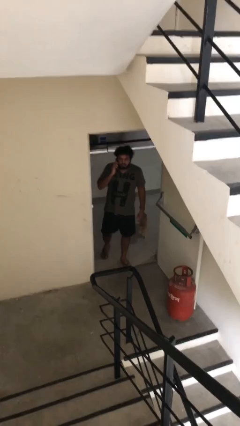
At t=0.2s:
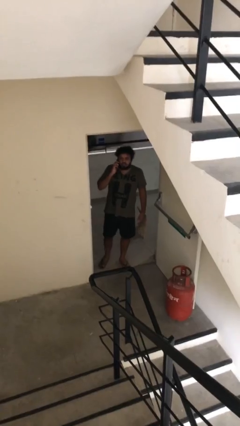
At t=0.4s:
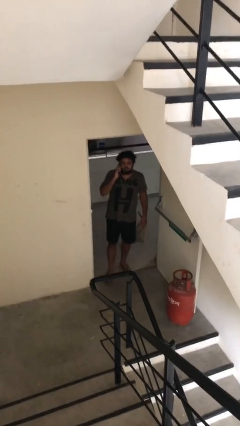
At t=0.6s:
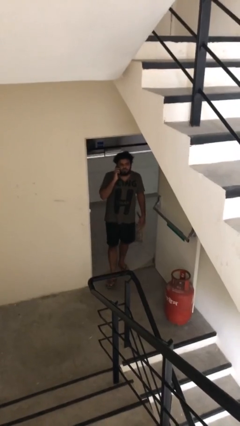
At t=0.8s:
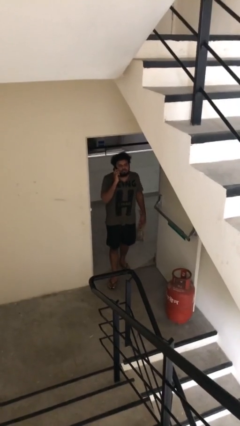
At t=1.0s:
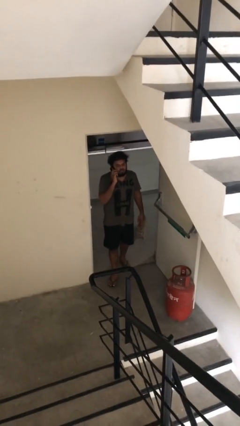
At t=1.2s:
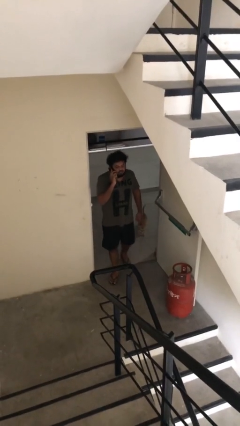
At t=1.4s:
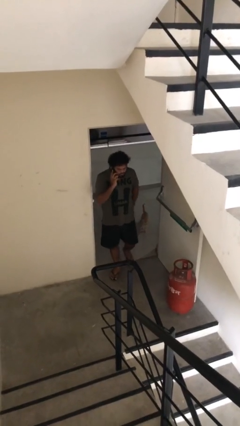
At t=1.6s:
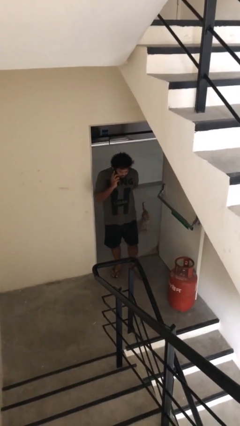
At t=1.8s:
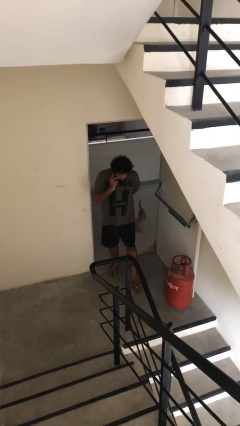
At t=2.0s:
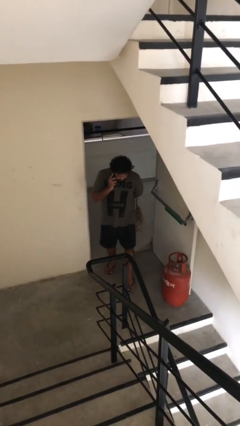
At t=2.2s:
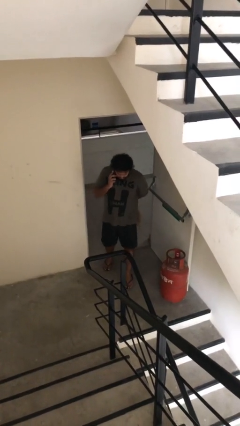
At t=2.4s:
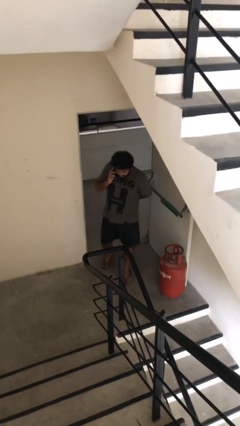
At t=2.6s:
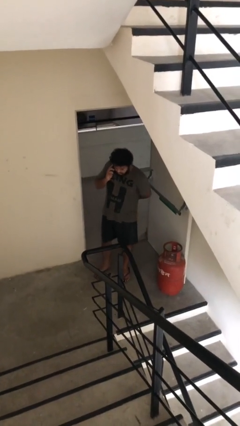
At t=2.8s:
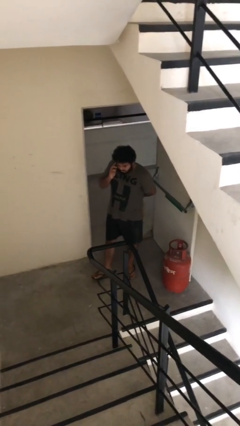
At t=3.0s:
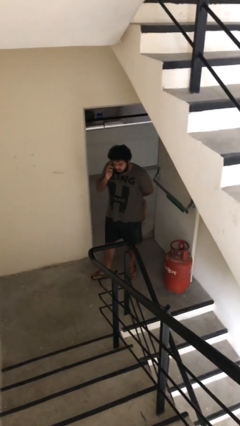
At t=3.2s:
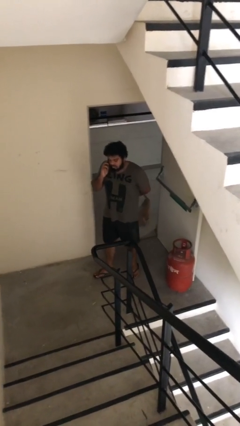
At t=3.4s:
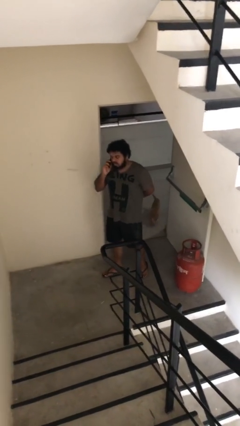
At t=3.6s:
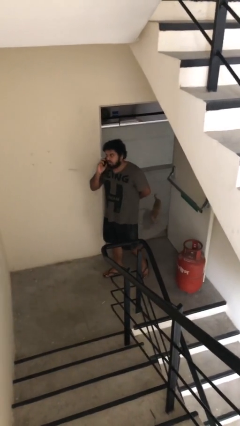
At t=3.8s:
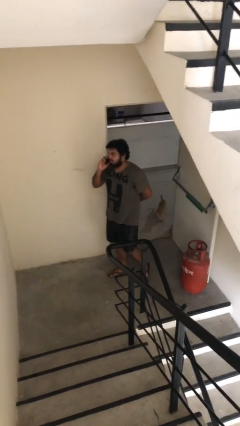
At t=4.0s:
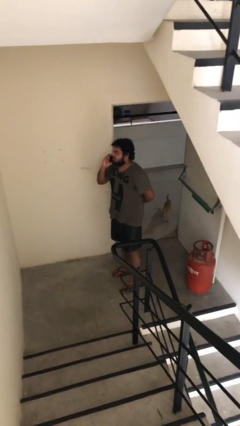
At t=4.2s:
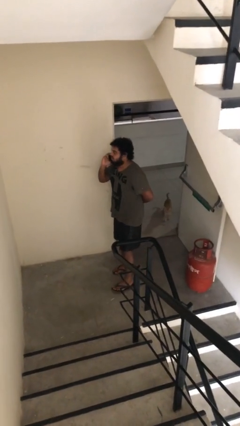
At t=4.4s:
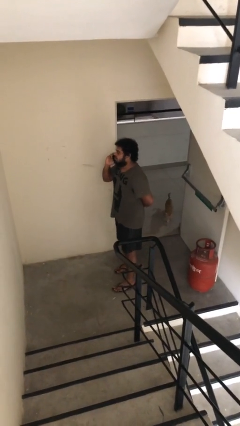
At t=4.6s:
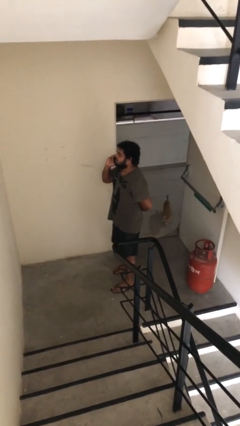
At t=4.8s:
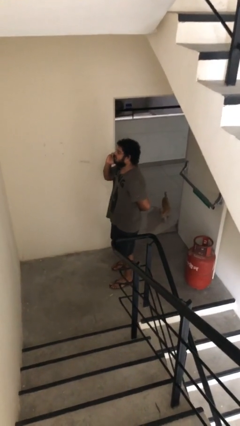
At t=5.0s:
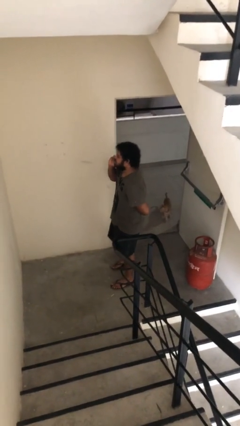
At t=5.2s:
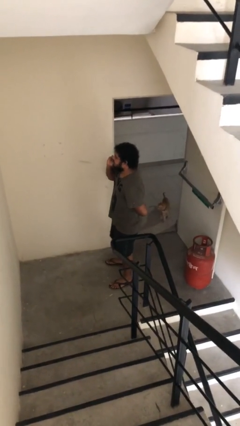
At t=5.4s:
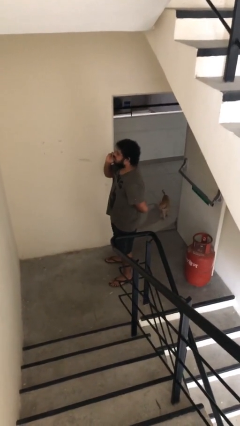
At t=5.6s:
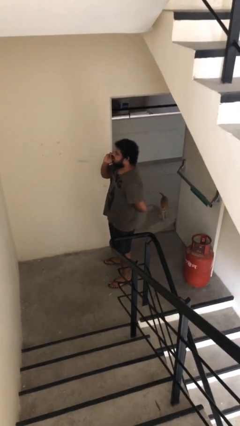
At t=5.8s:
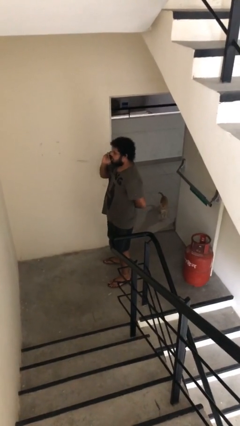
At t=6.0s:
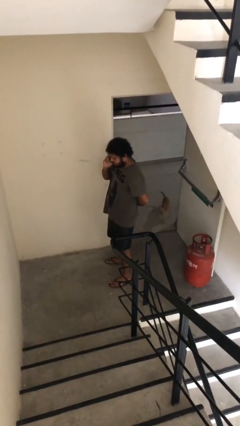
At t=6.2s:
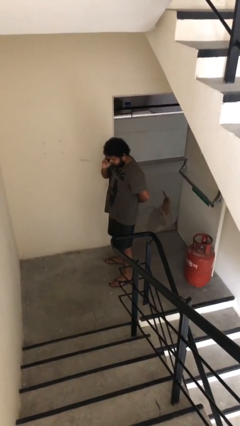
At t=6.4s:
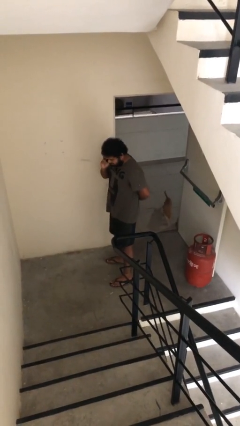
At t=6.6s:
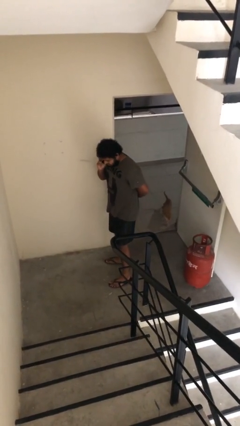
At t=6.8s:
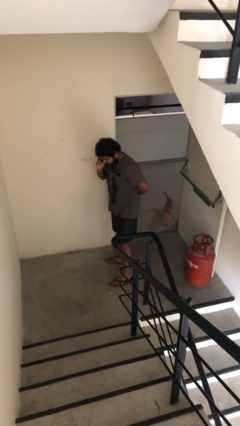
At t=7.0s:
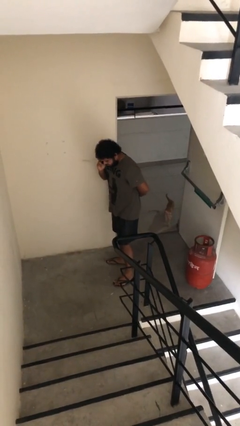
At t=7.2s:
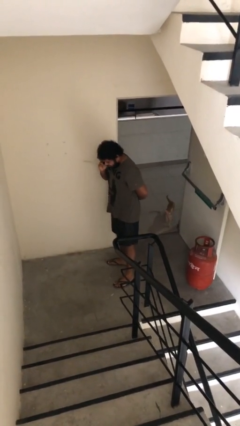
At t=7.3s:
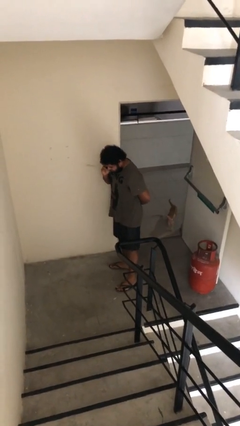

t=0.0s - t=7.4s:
person enters scene through structure

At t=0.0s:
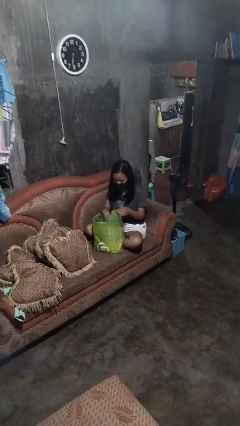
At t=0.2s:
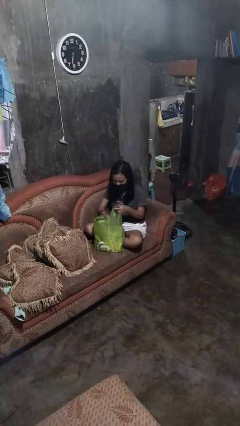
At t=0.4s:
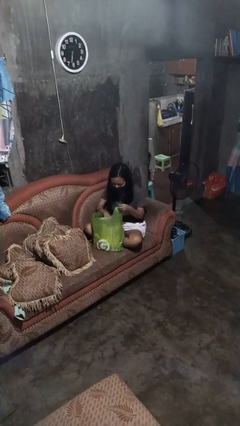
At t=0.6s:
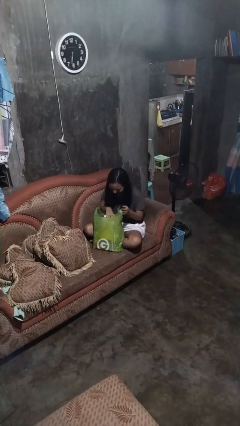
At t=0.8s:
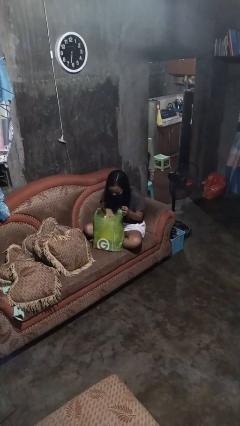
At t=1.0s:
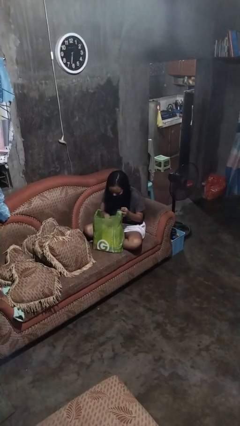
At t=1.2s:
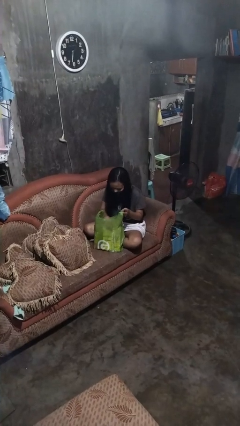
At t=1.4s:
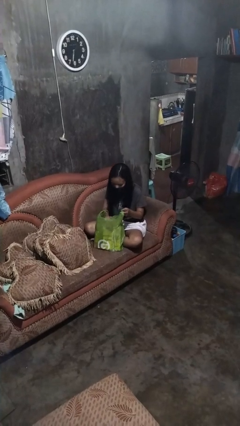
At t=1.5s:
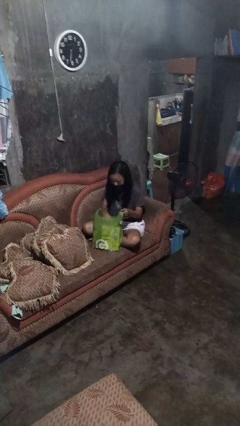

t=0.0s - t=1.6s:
person searches in bag

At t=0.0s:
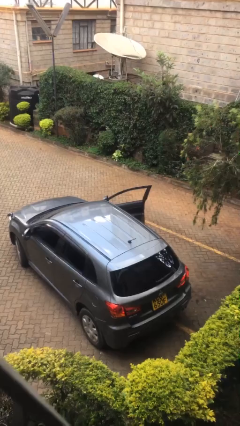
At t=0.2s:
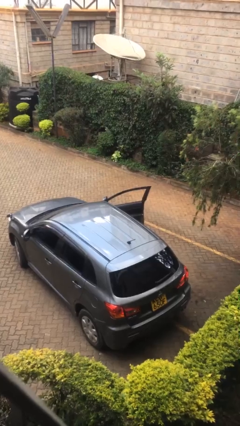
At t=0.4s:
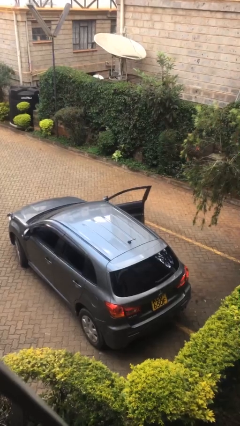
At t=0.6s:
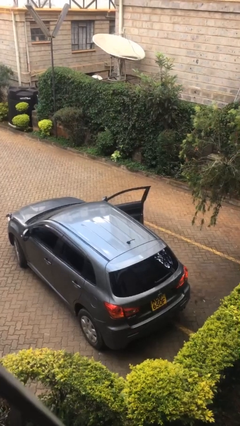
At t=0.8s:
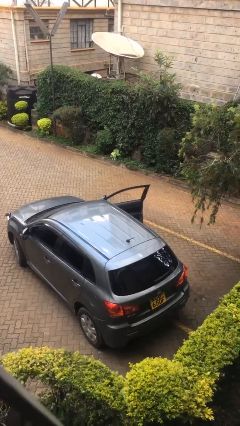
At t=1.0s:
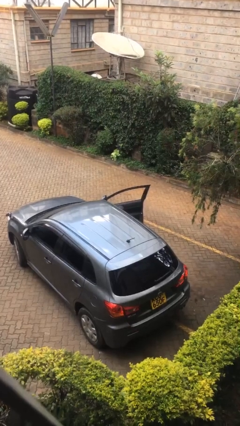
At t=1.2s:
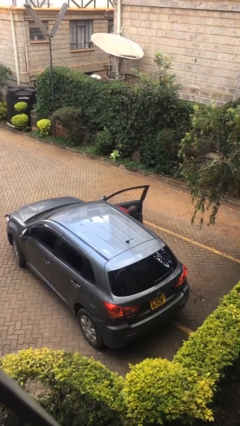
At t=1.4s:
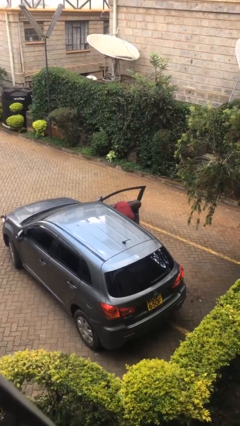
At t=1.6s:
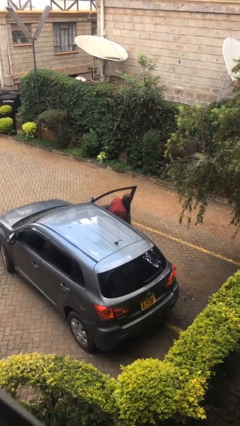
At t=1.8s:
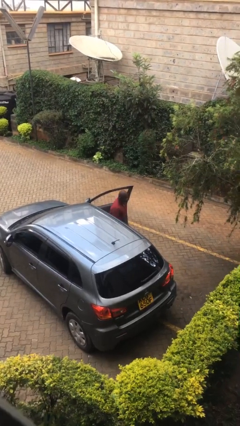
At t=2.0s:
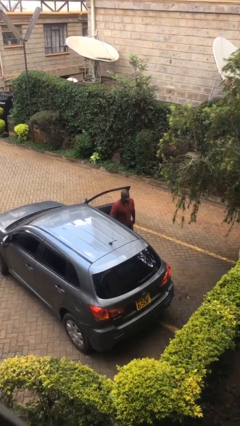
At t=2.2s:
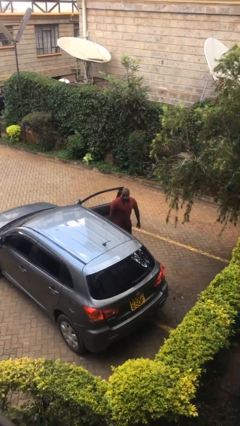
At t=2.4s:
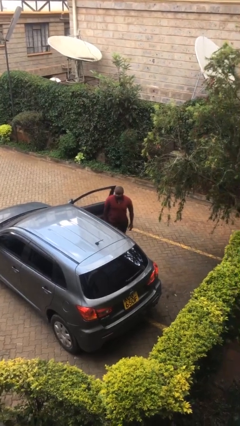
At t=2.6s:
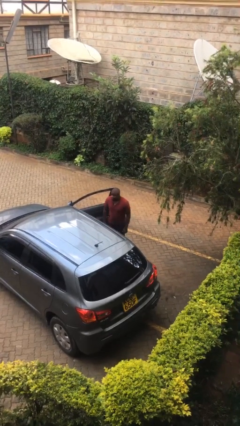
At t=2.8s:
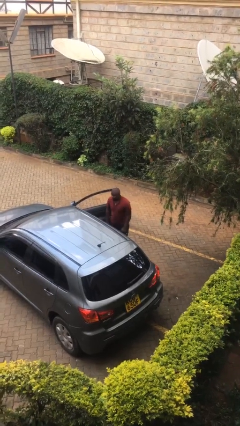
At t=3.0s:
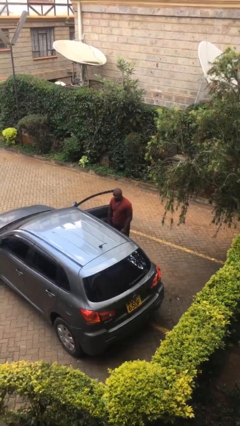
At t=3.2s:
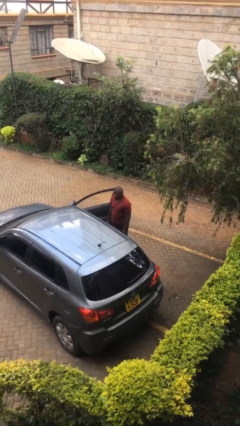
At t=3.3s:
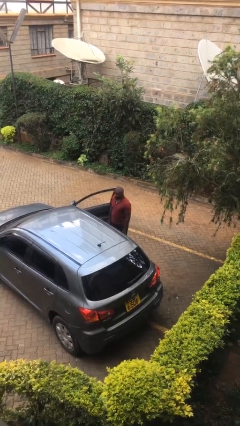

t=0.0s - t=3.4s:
person exits car

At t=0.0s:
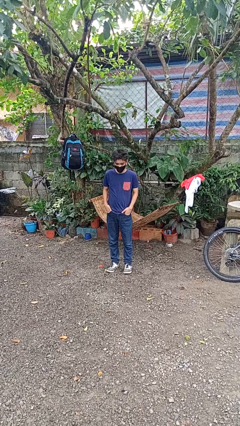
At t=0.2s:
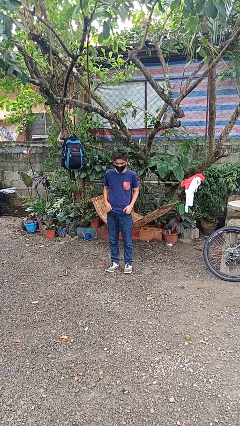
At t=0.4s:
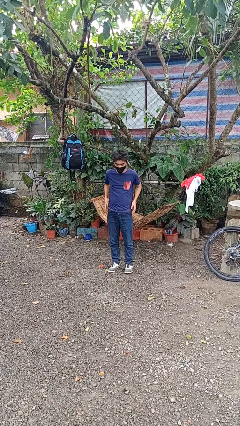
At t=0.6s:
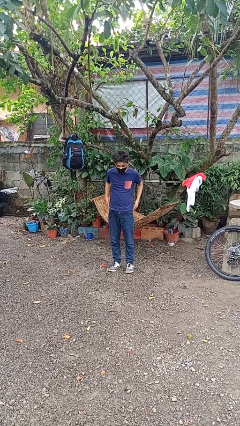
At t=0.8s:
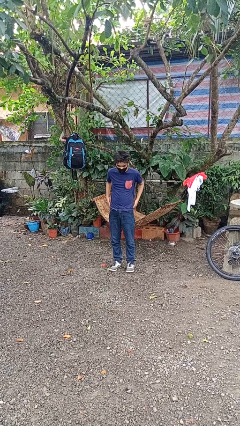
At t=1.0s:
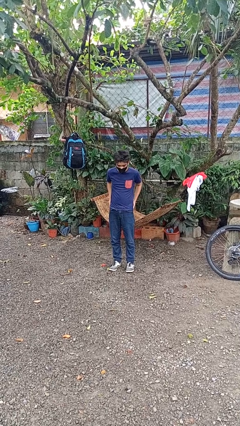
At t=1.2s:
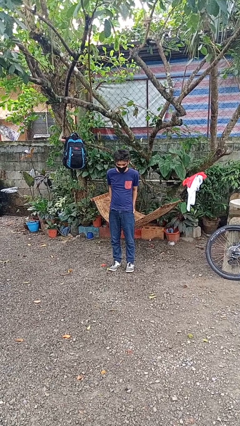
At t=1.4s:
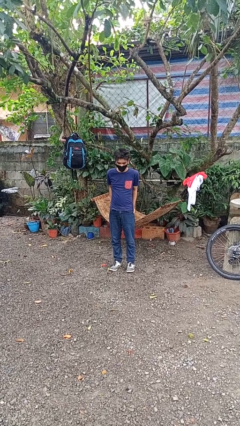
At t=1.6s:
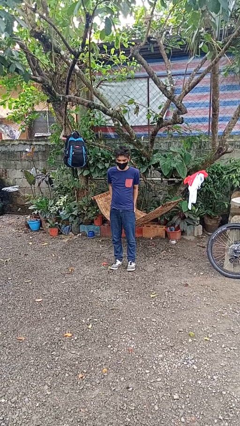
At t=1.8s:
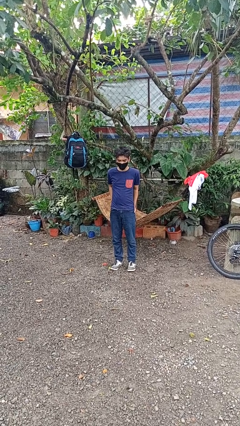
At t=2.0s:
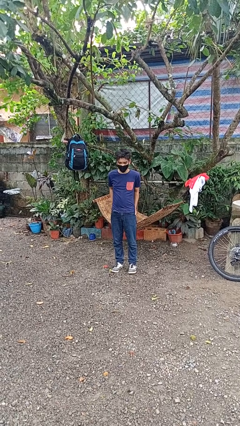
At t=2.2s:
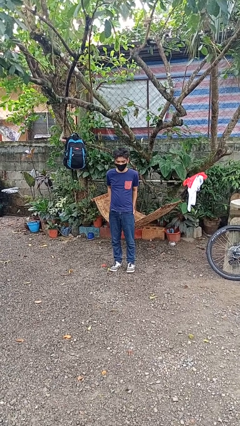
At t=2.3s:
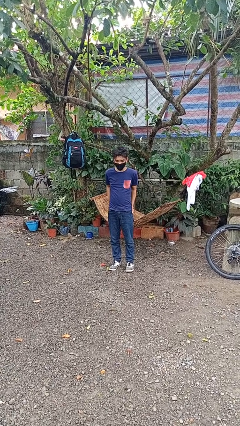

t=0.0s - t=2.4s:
person puts hands in back pockets

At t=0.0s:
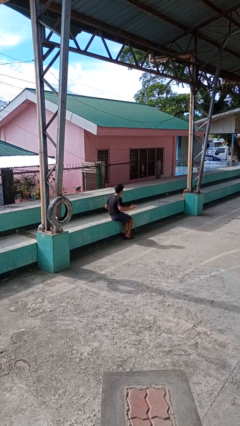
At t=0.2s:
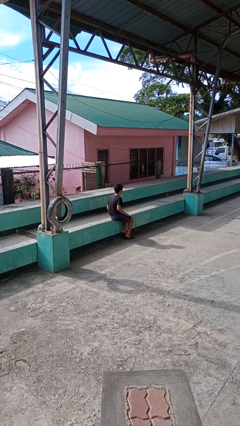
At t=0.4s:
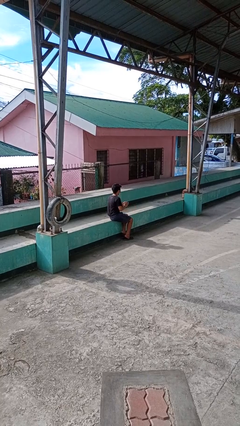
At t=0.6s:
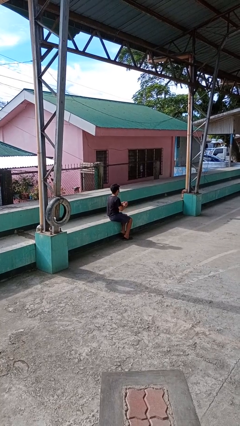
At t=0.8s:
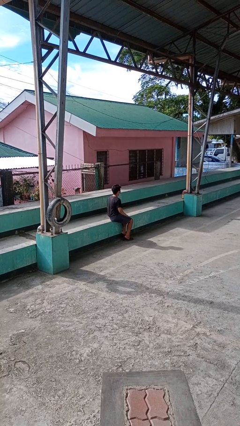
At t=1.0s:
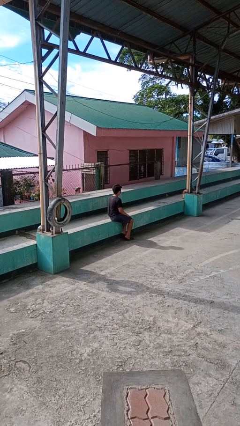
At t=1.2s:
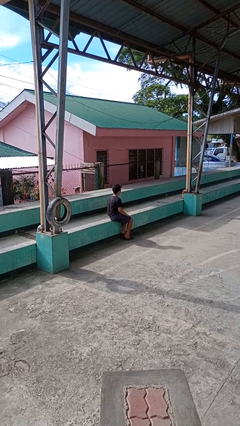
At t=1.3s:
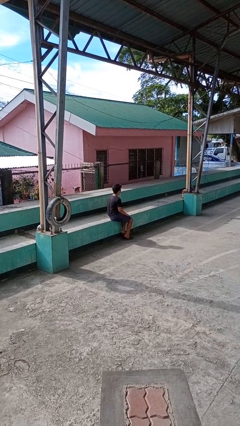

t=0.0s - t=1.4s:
person slaps hands on thighs

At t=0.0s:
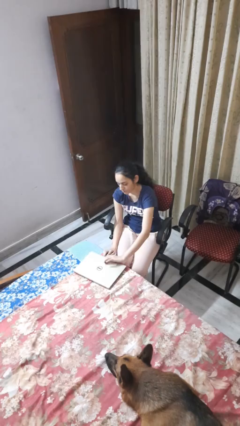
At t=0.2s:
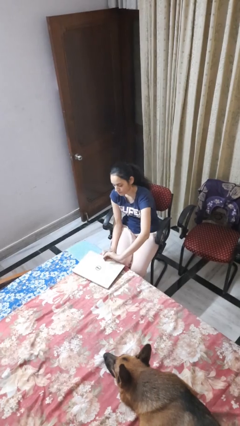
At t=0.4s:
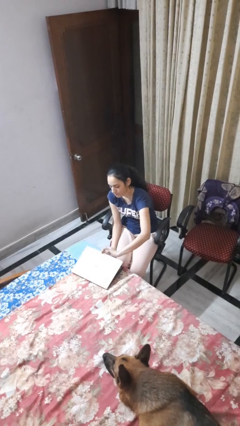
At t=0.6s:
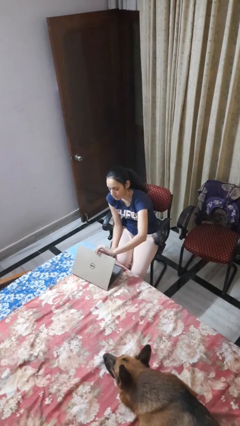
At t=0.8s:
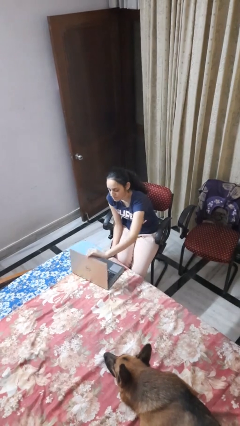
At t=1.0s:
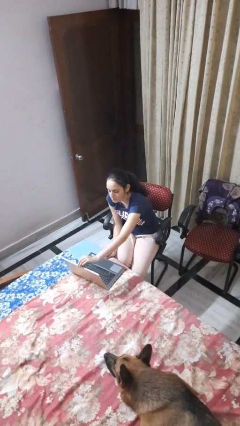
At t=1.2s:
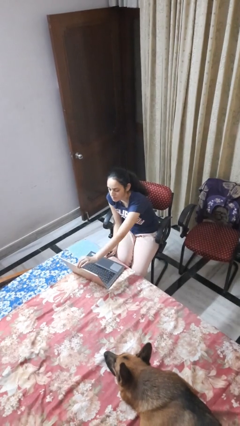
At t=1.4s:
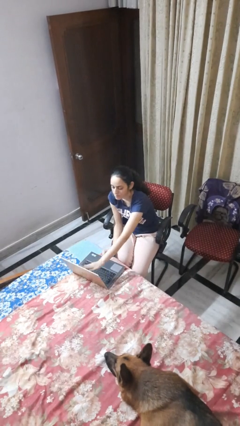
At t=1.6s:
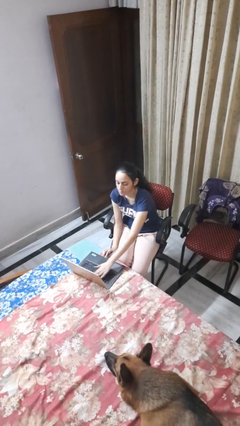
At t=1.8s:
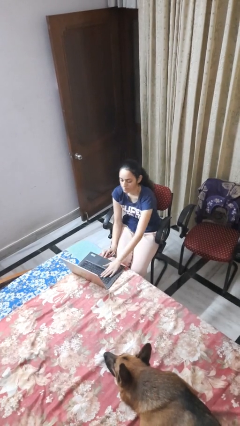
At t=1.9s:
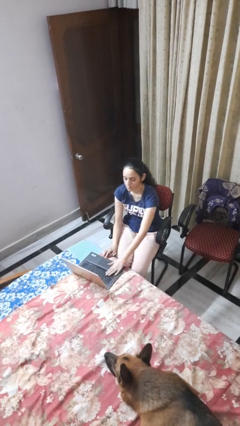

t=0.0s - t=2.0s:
person opens laptop
